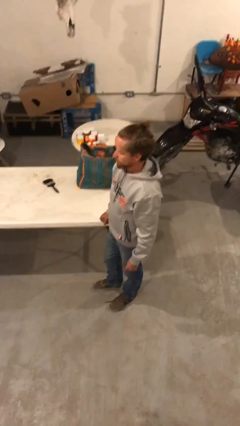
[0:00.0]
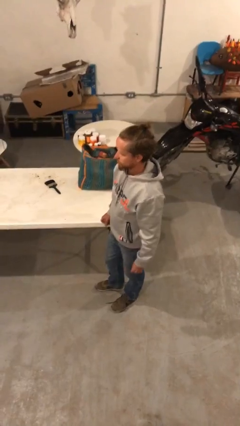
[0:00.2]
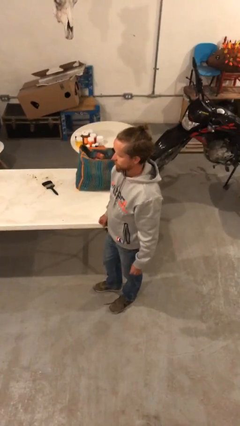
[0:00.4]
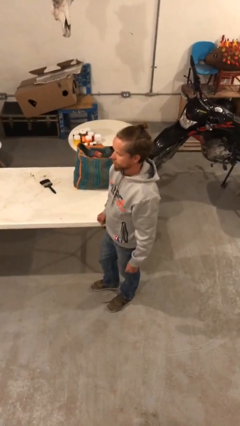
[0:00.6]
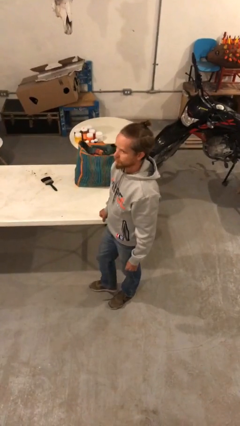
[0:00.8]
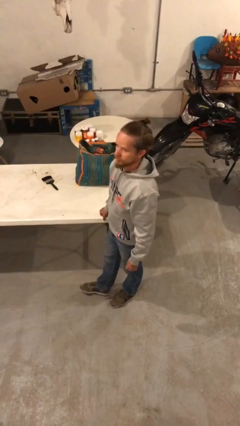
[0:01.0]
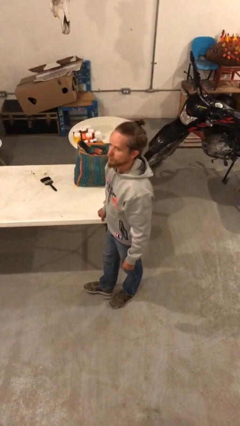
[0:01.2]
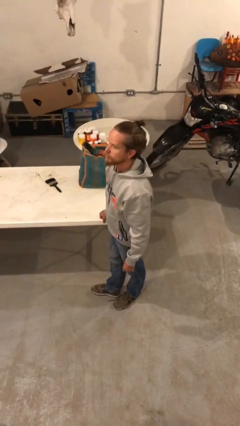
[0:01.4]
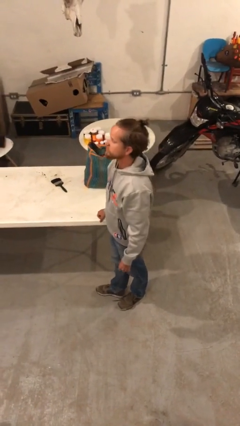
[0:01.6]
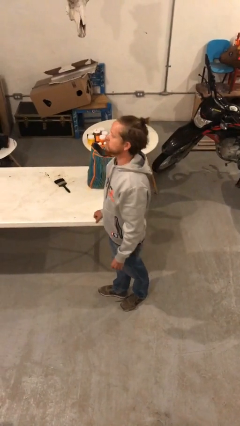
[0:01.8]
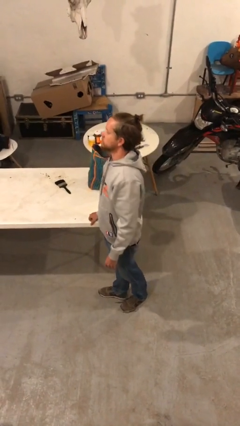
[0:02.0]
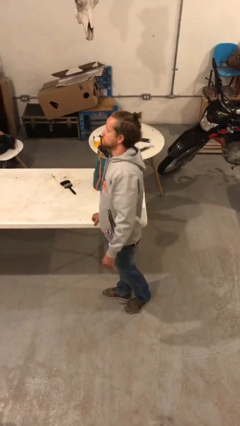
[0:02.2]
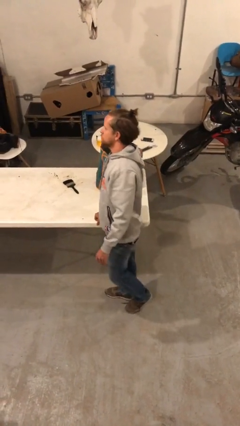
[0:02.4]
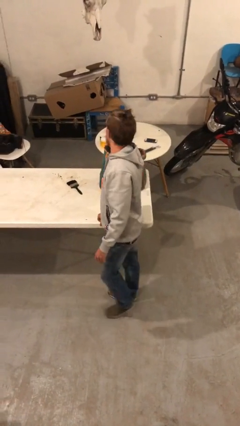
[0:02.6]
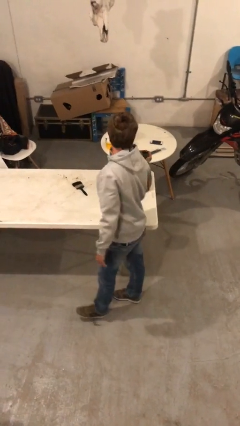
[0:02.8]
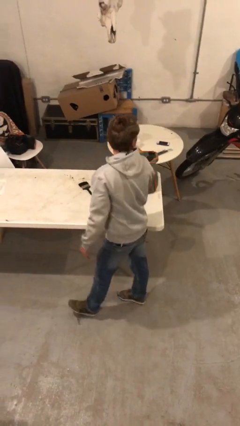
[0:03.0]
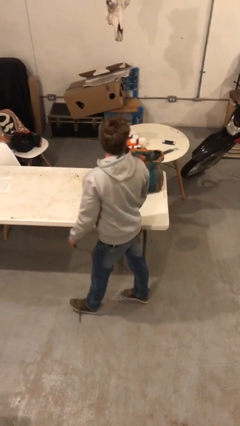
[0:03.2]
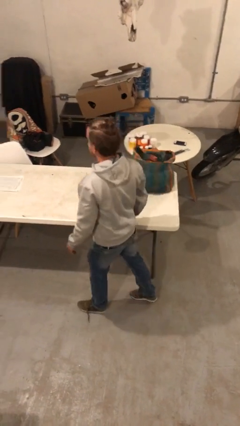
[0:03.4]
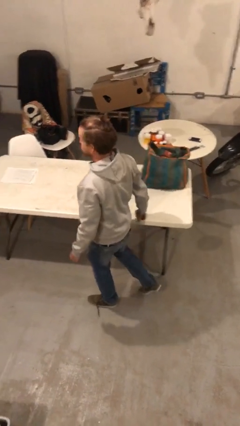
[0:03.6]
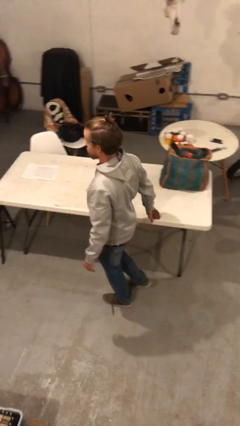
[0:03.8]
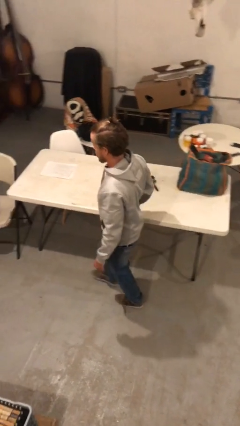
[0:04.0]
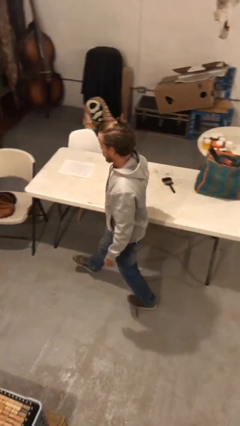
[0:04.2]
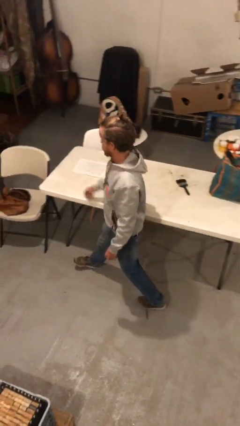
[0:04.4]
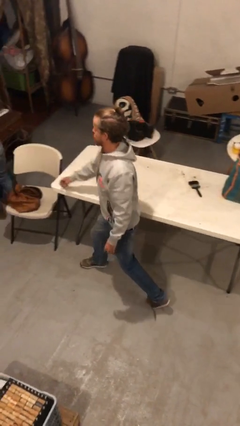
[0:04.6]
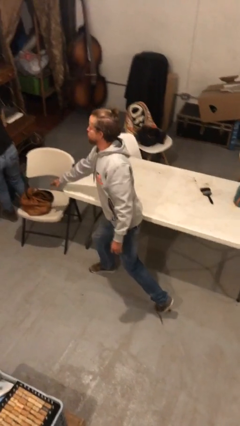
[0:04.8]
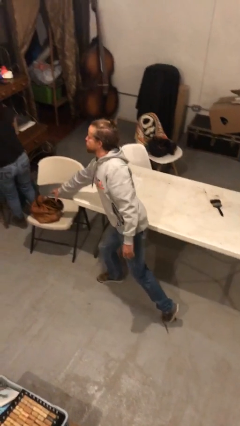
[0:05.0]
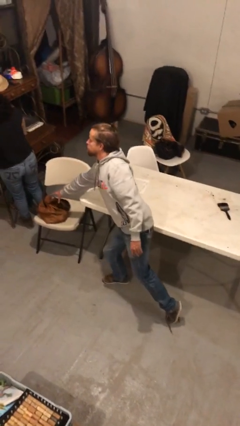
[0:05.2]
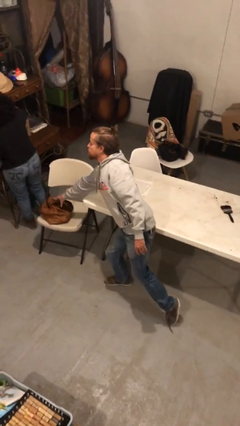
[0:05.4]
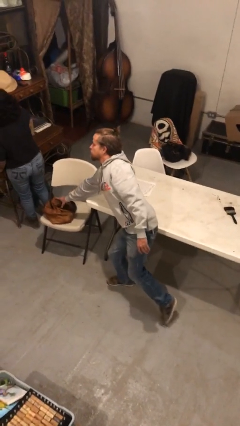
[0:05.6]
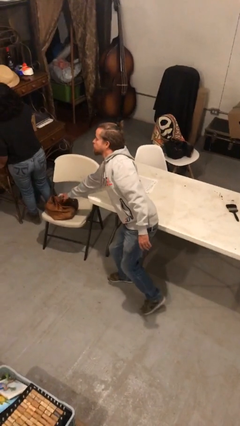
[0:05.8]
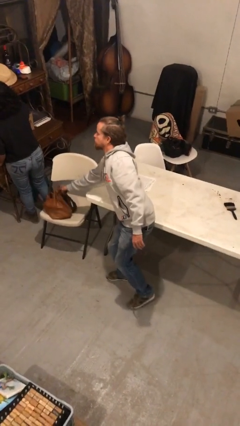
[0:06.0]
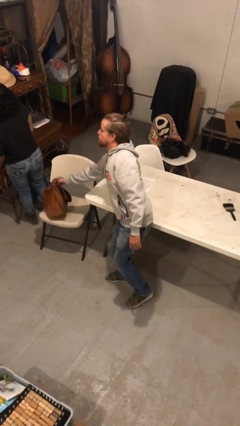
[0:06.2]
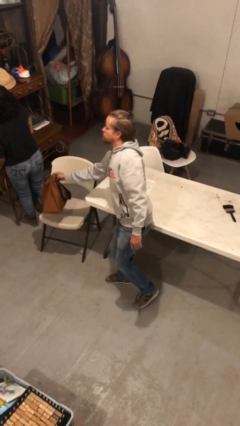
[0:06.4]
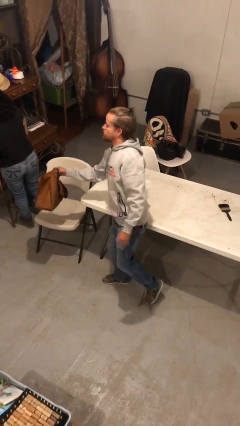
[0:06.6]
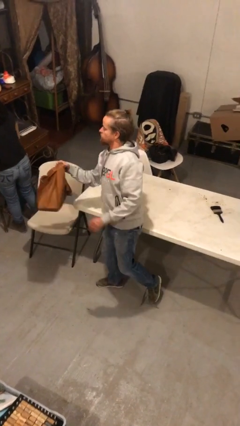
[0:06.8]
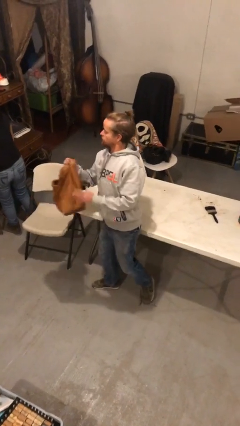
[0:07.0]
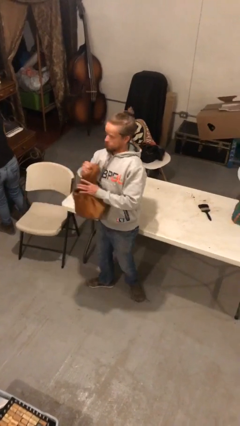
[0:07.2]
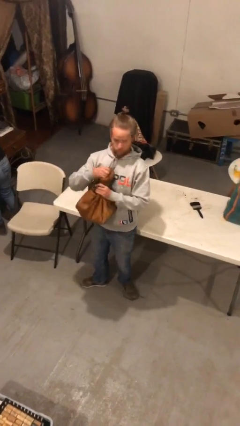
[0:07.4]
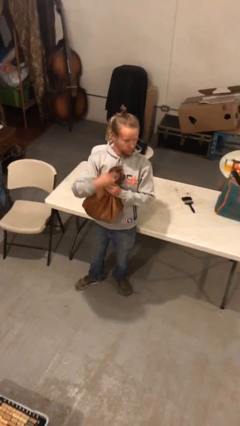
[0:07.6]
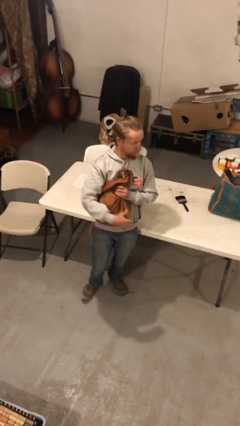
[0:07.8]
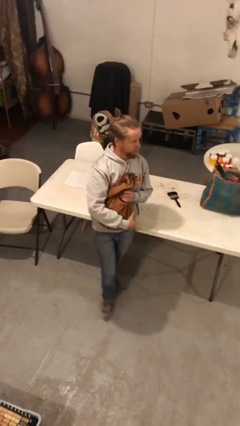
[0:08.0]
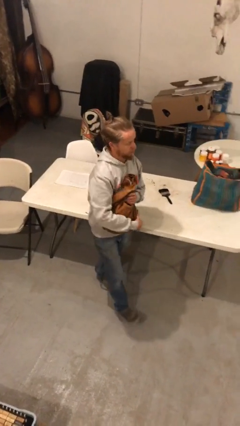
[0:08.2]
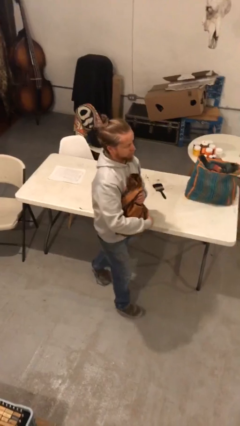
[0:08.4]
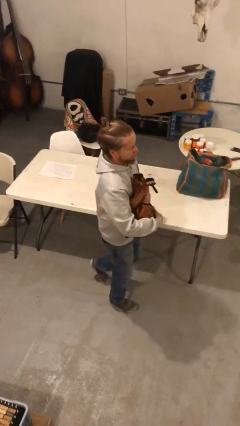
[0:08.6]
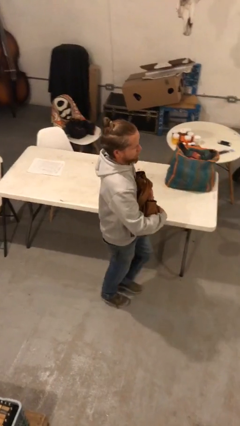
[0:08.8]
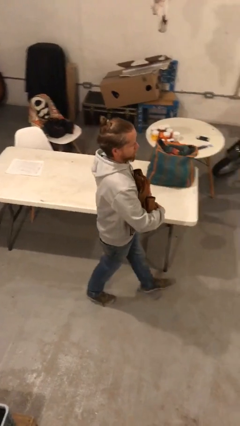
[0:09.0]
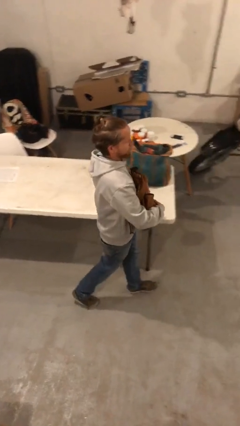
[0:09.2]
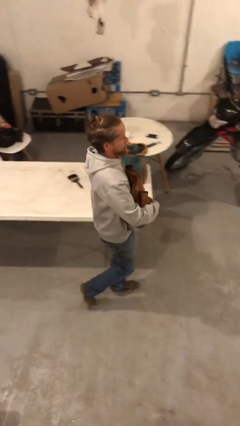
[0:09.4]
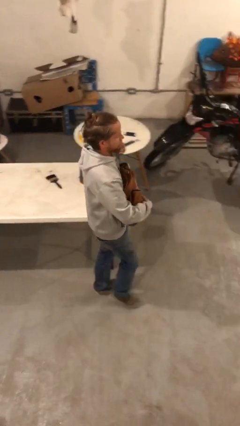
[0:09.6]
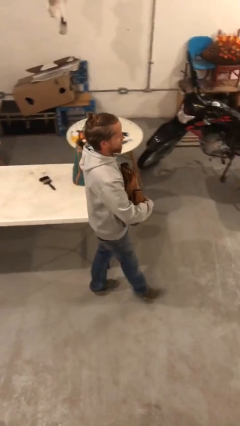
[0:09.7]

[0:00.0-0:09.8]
person steals object from person

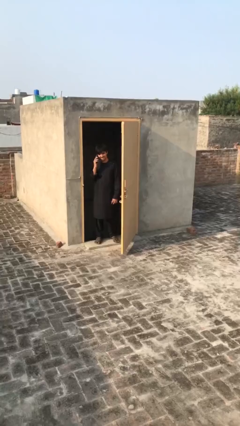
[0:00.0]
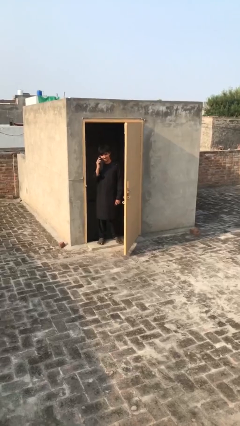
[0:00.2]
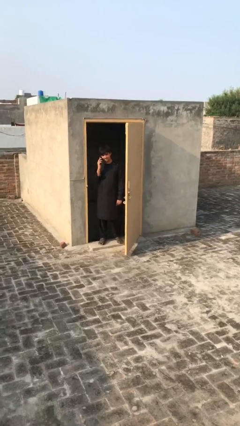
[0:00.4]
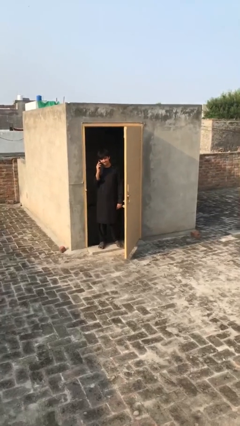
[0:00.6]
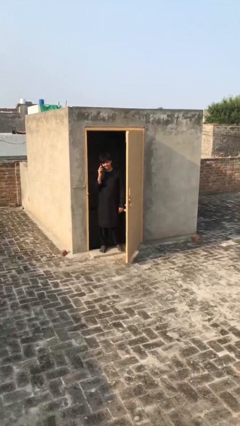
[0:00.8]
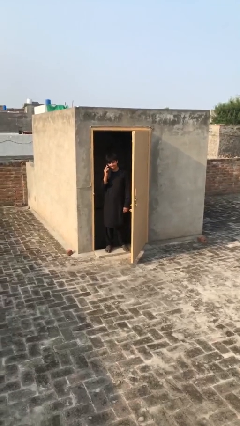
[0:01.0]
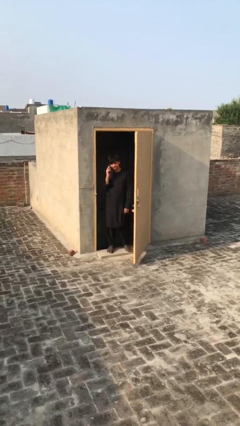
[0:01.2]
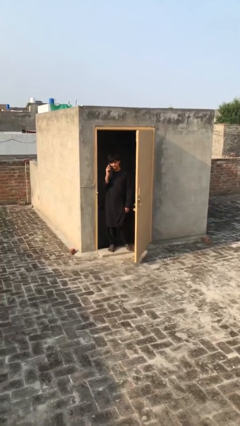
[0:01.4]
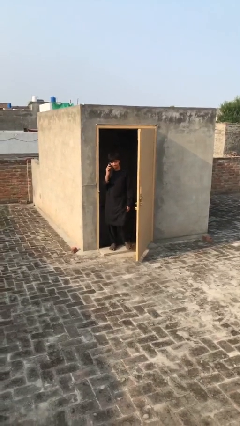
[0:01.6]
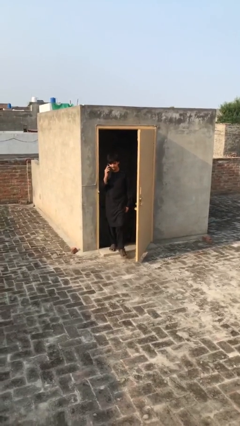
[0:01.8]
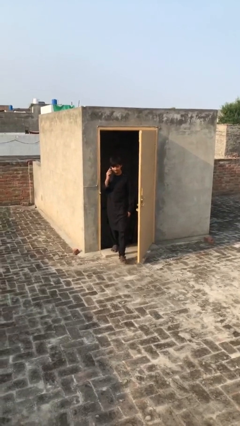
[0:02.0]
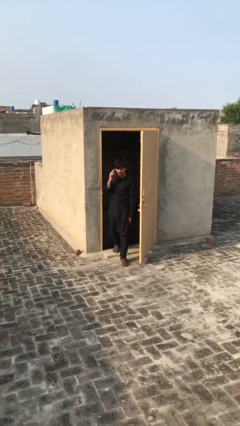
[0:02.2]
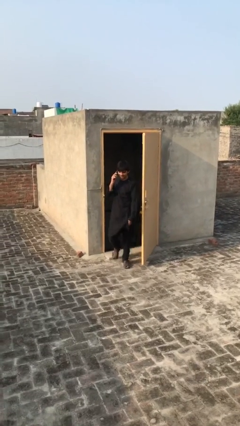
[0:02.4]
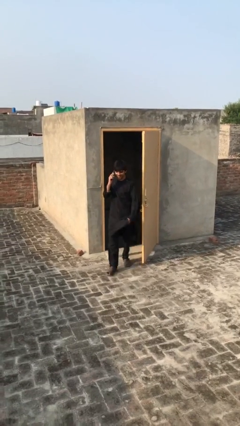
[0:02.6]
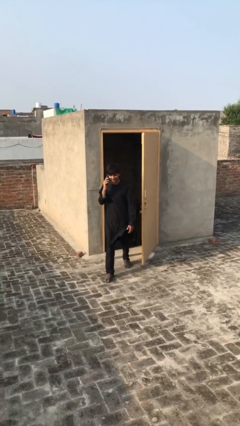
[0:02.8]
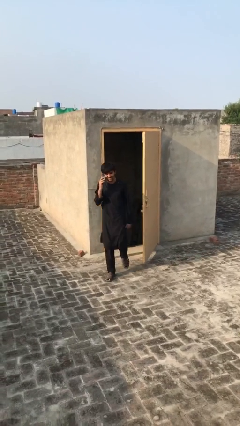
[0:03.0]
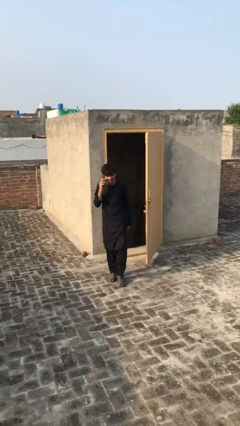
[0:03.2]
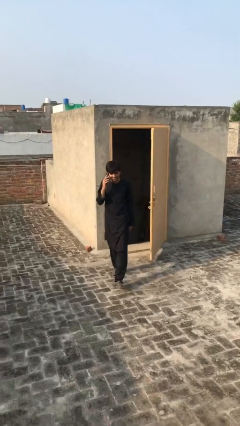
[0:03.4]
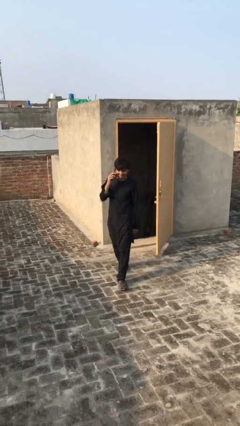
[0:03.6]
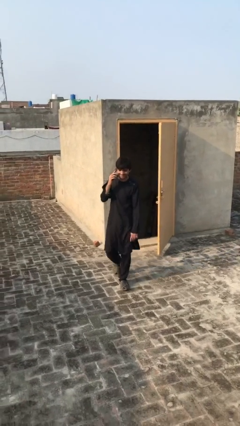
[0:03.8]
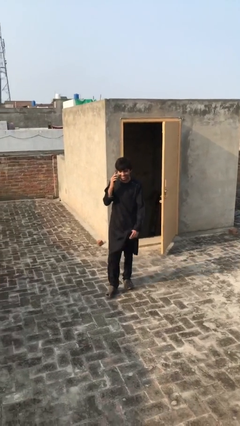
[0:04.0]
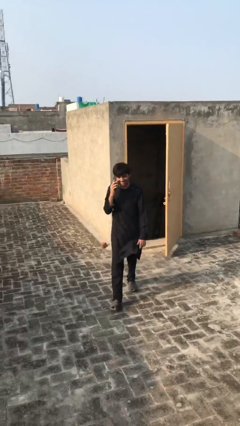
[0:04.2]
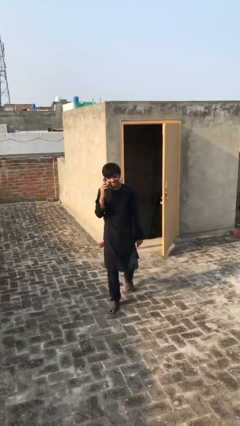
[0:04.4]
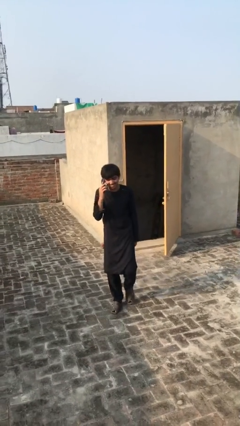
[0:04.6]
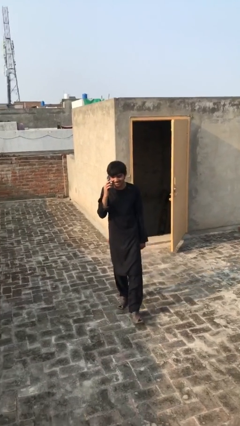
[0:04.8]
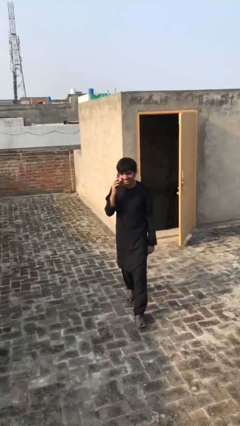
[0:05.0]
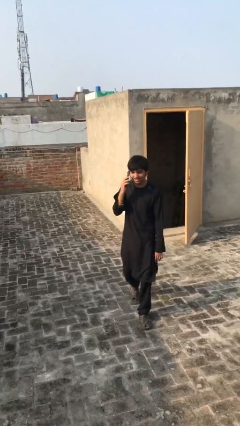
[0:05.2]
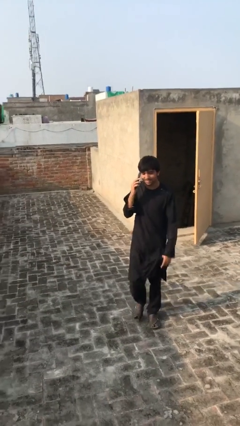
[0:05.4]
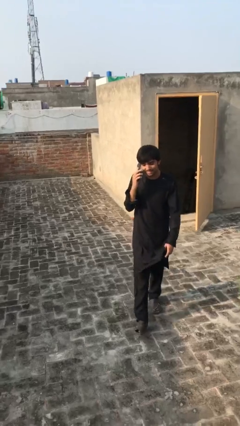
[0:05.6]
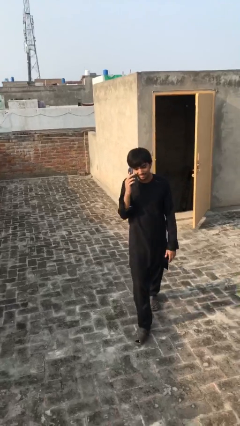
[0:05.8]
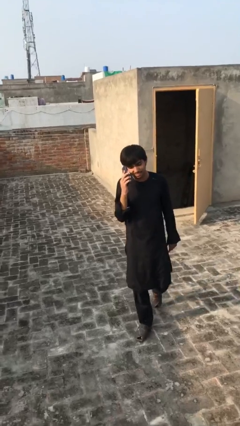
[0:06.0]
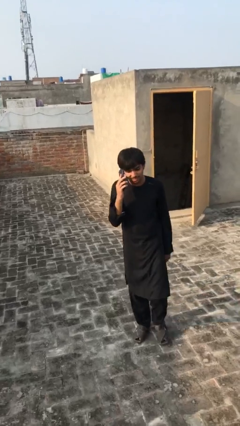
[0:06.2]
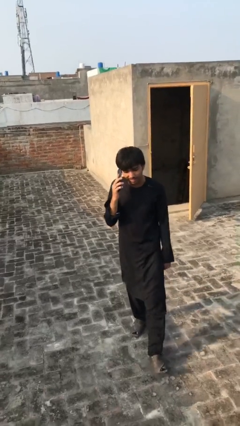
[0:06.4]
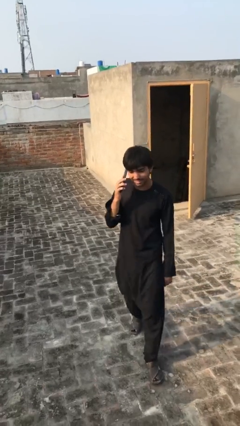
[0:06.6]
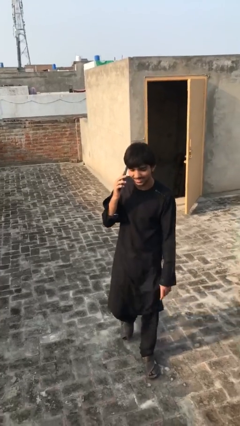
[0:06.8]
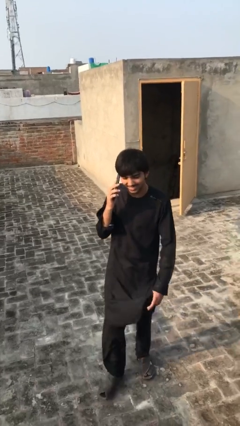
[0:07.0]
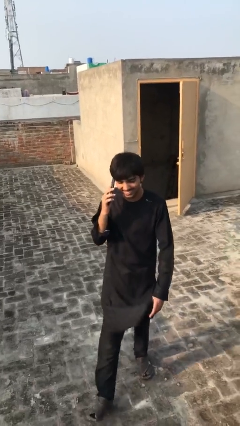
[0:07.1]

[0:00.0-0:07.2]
person enters scene through structure

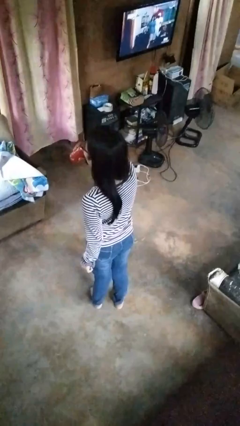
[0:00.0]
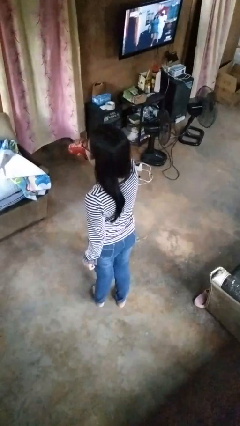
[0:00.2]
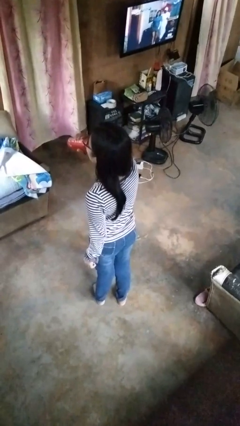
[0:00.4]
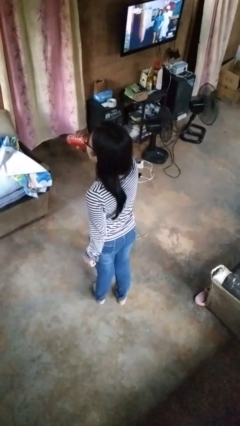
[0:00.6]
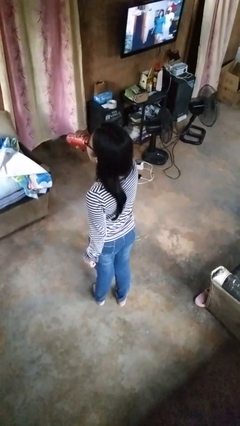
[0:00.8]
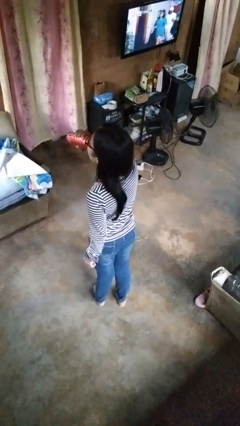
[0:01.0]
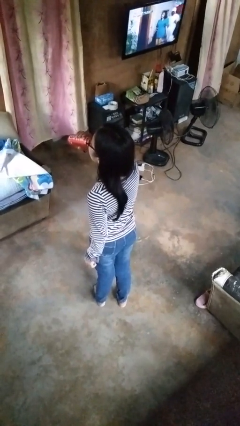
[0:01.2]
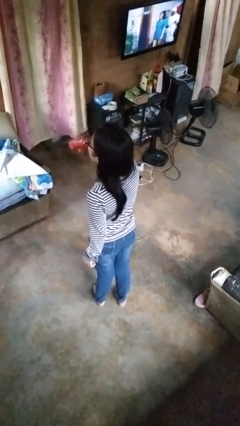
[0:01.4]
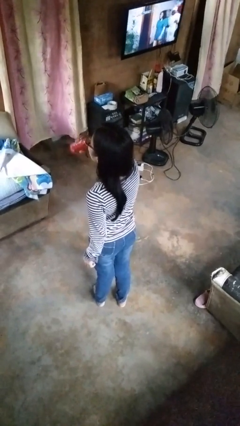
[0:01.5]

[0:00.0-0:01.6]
person drinks from beverage can
